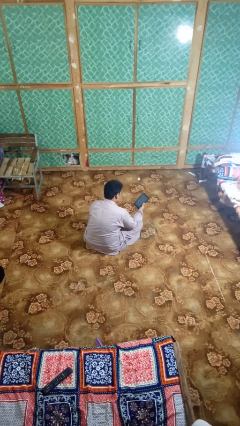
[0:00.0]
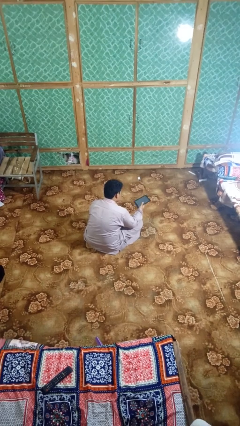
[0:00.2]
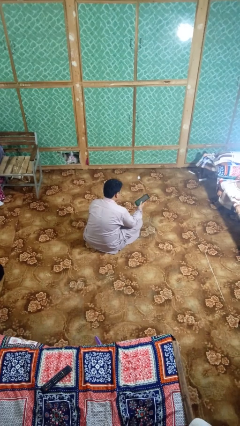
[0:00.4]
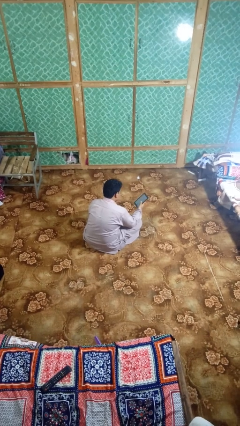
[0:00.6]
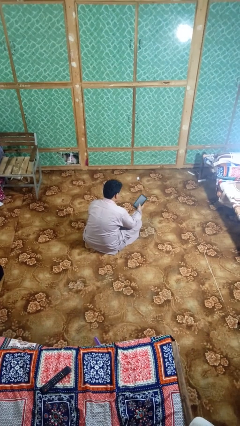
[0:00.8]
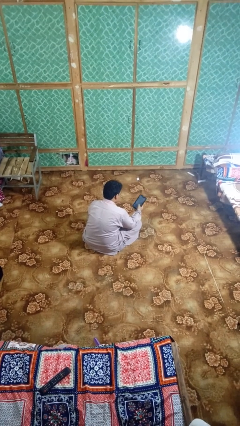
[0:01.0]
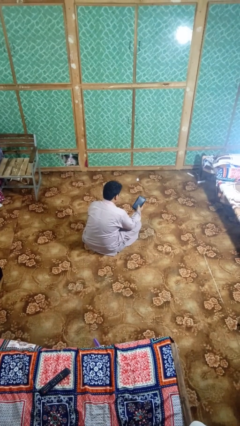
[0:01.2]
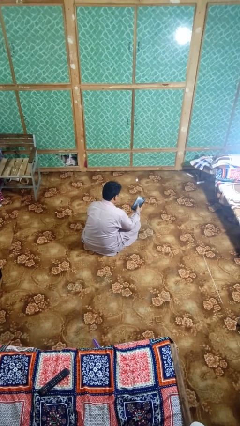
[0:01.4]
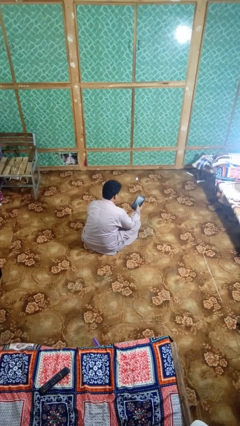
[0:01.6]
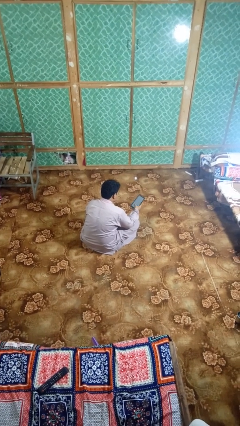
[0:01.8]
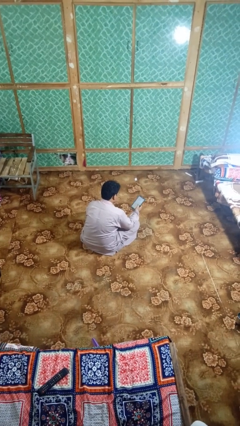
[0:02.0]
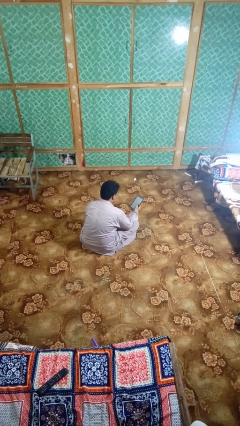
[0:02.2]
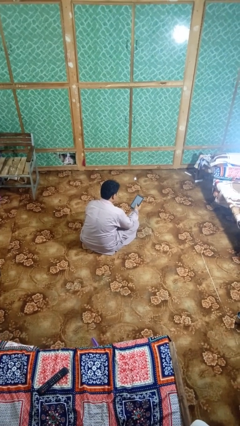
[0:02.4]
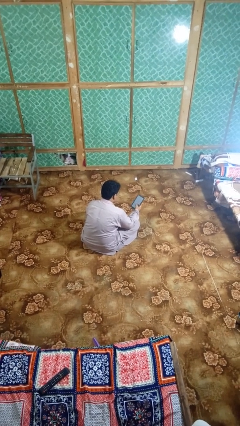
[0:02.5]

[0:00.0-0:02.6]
person interacts with tablet

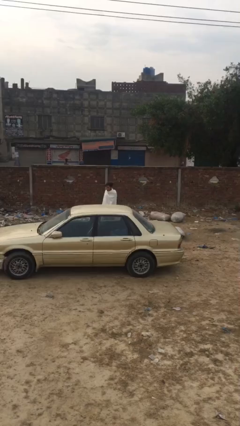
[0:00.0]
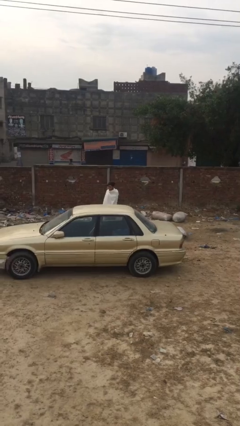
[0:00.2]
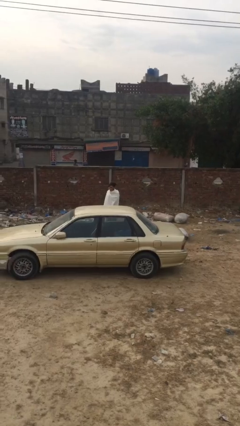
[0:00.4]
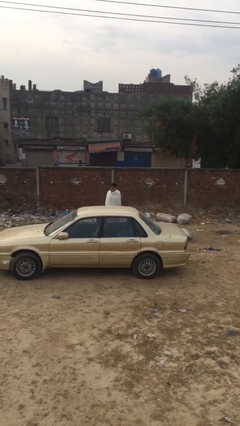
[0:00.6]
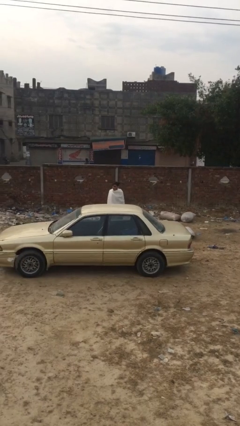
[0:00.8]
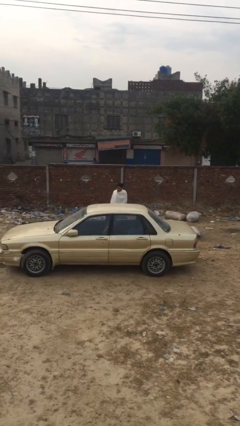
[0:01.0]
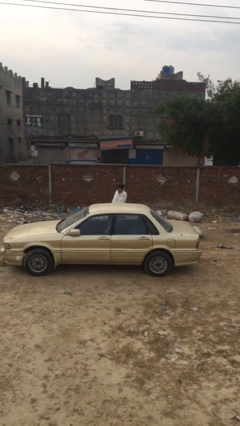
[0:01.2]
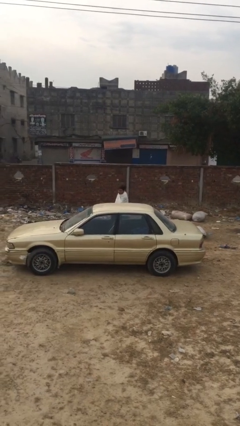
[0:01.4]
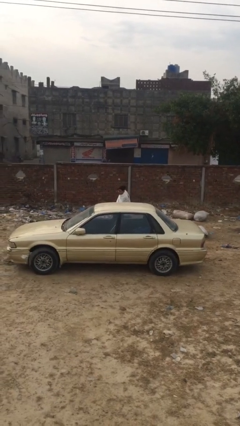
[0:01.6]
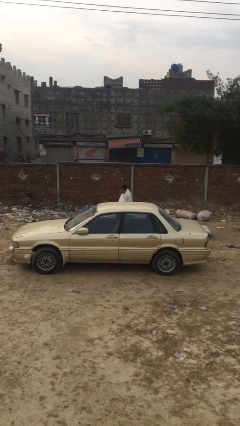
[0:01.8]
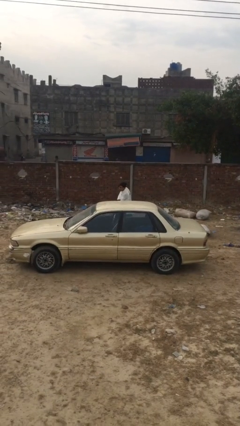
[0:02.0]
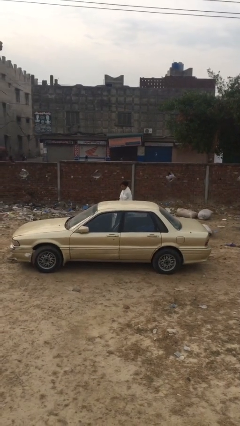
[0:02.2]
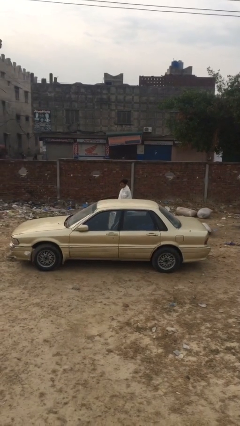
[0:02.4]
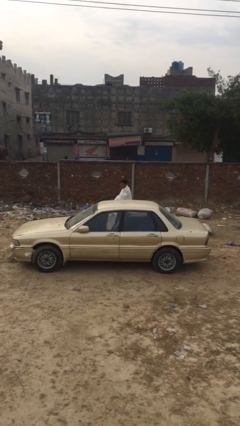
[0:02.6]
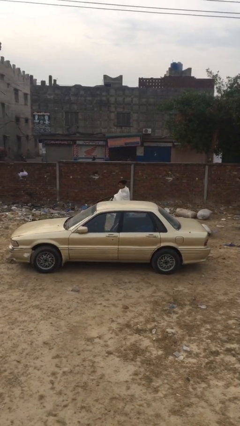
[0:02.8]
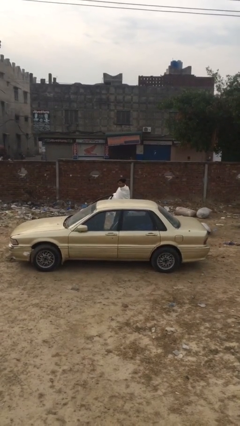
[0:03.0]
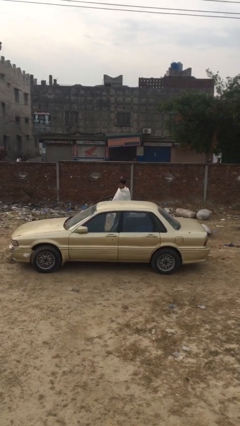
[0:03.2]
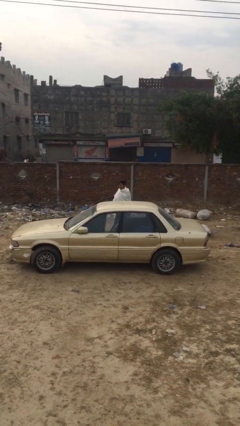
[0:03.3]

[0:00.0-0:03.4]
person opens car door

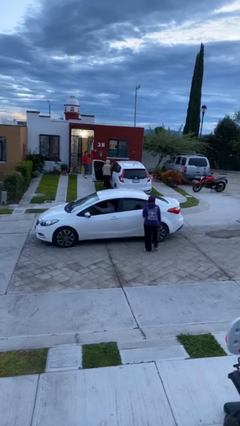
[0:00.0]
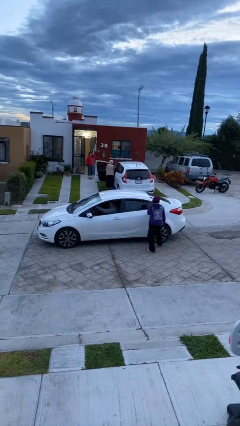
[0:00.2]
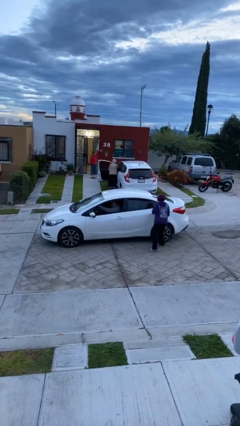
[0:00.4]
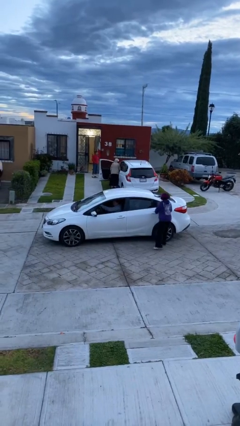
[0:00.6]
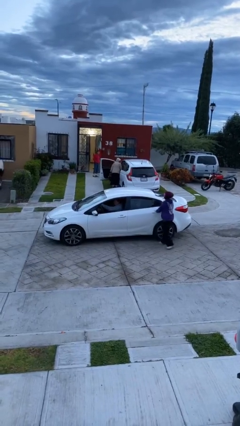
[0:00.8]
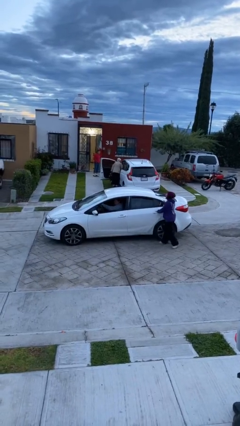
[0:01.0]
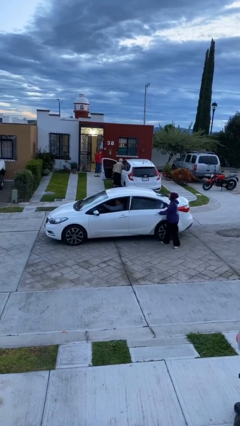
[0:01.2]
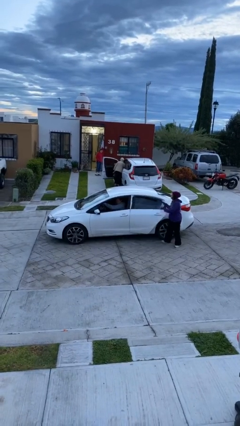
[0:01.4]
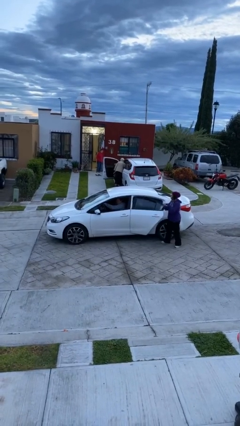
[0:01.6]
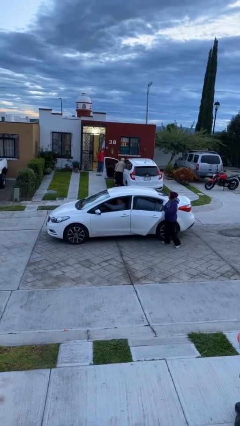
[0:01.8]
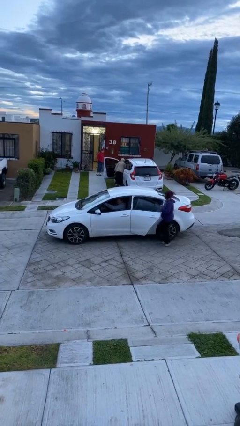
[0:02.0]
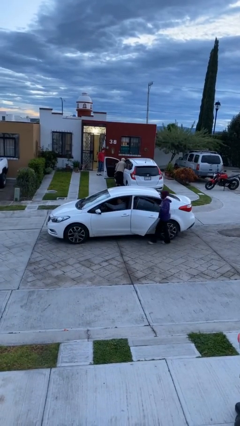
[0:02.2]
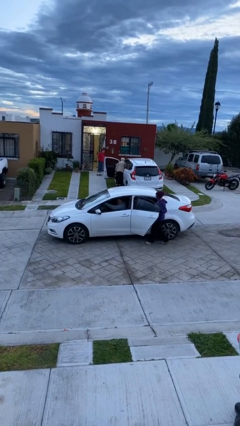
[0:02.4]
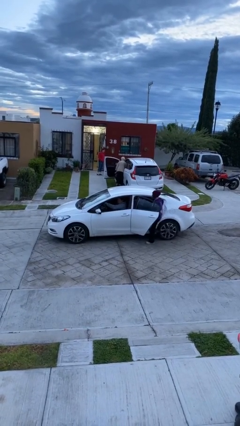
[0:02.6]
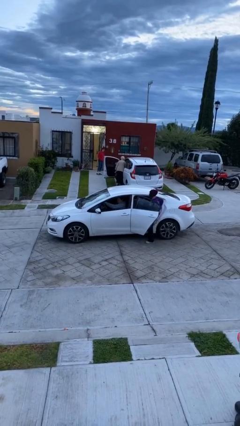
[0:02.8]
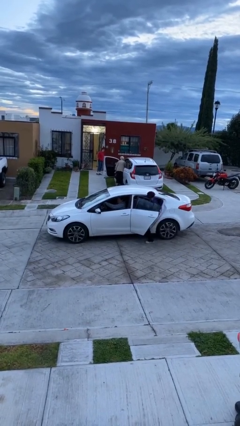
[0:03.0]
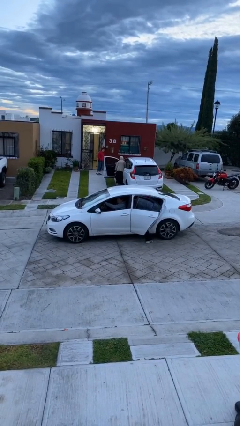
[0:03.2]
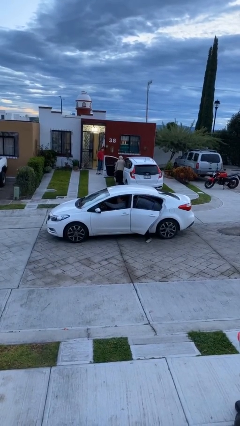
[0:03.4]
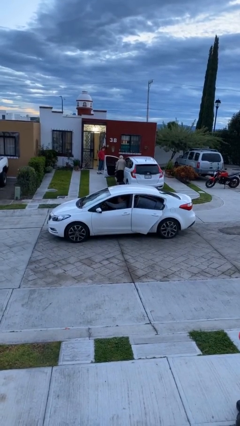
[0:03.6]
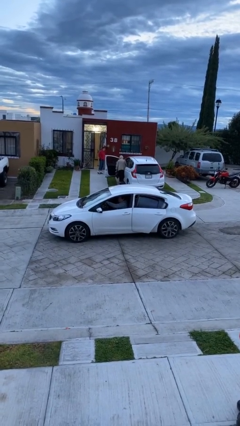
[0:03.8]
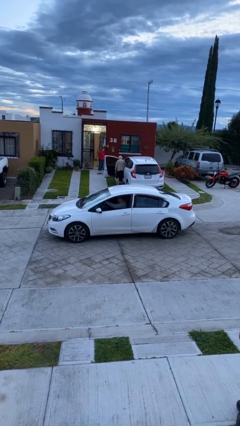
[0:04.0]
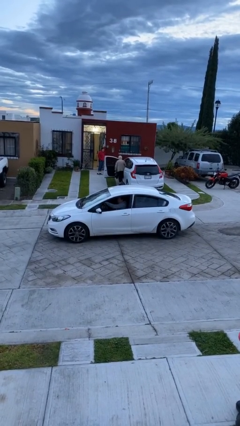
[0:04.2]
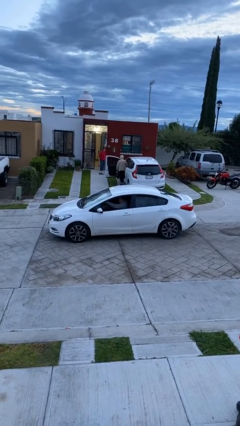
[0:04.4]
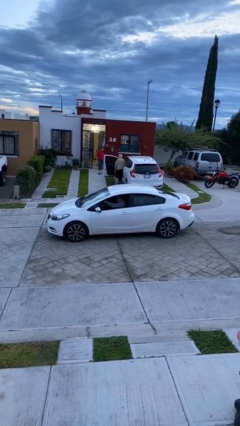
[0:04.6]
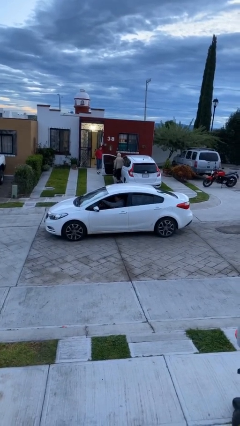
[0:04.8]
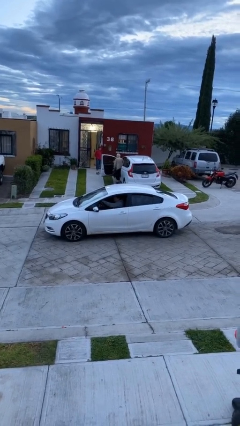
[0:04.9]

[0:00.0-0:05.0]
car picks up person

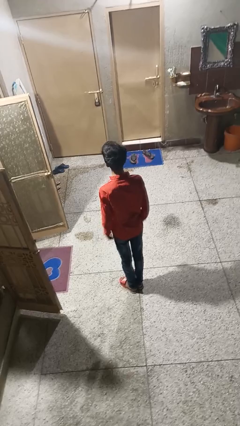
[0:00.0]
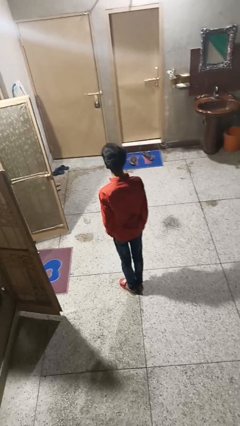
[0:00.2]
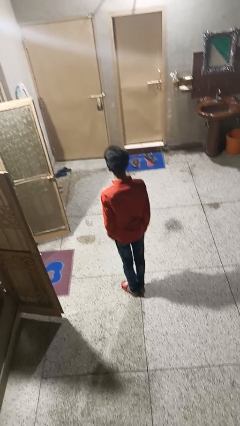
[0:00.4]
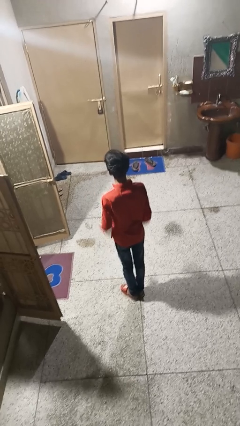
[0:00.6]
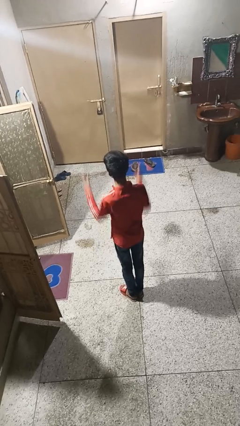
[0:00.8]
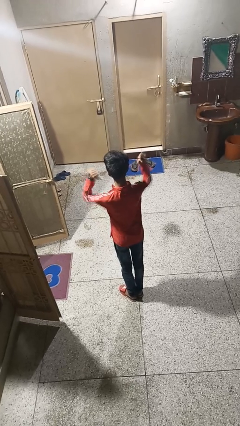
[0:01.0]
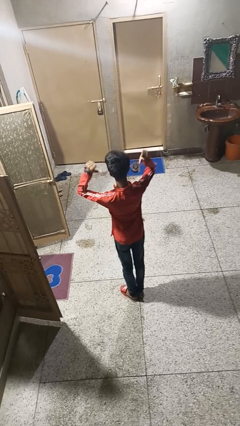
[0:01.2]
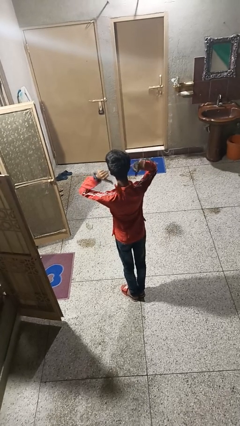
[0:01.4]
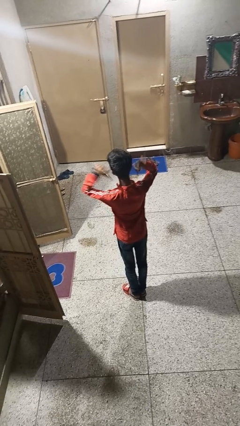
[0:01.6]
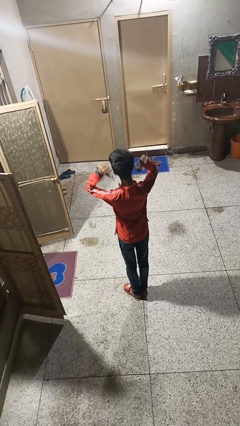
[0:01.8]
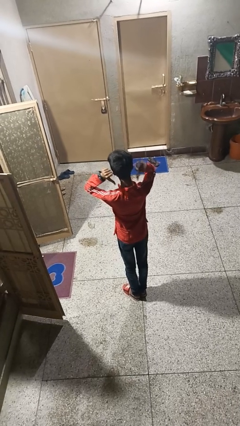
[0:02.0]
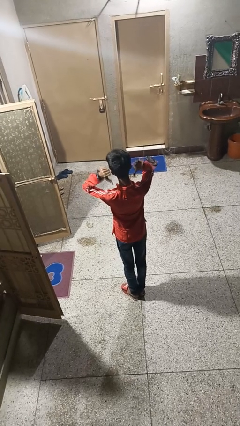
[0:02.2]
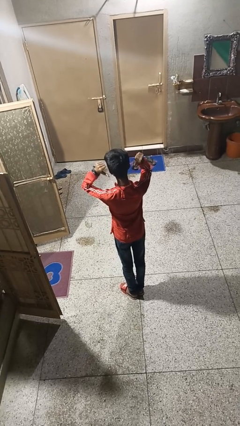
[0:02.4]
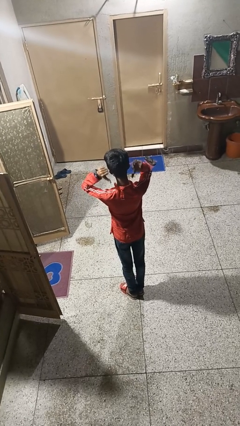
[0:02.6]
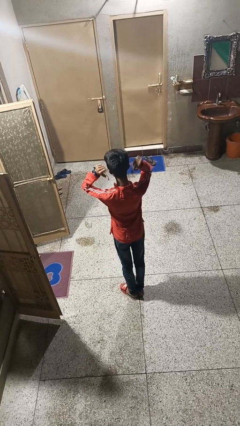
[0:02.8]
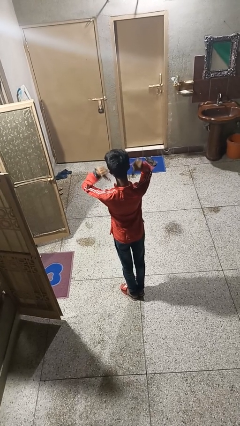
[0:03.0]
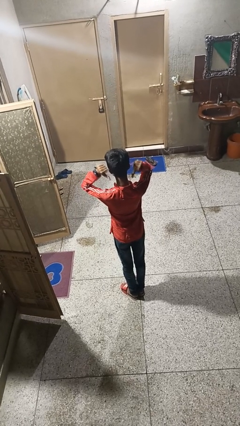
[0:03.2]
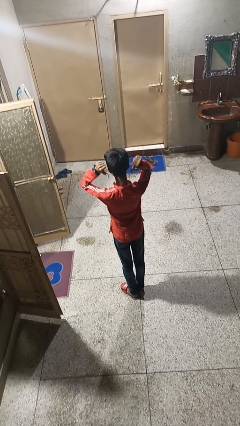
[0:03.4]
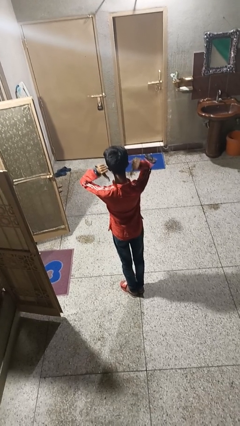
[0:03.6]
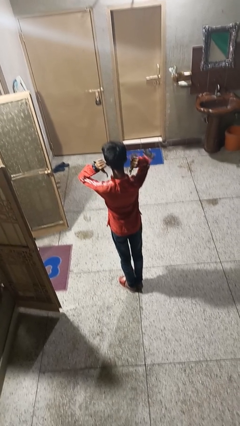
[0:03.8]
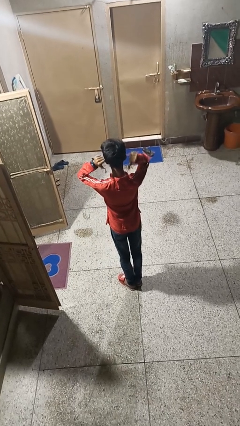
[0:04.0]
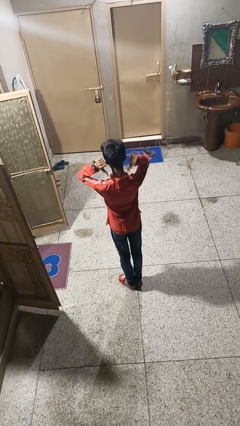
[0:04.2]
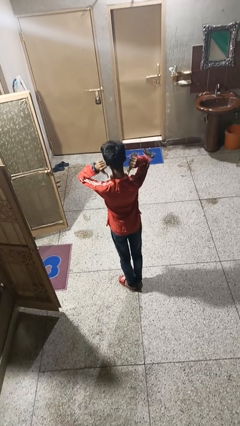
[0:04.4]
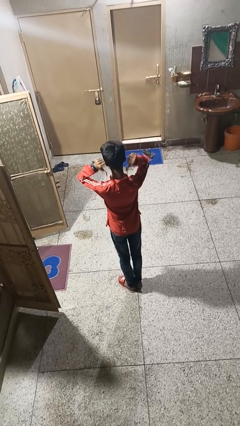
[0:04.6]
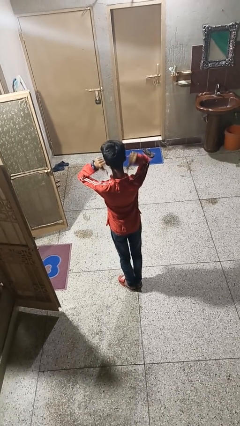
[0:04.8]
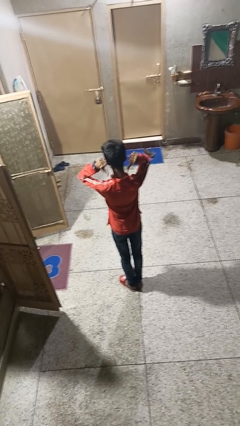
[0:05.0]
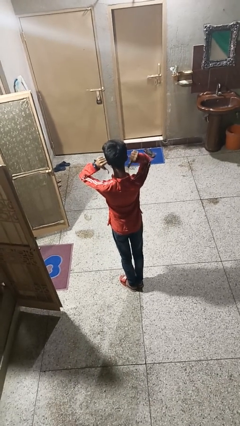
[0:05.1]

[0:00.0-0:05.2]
person gestures behind me

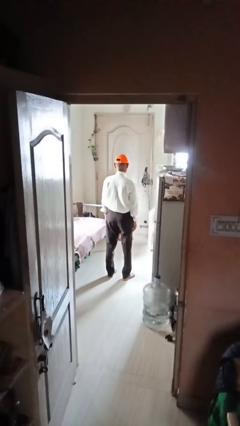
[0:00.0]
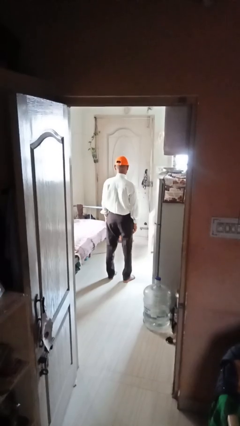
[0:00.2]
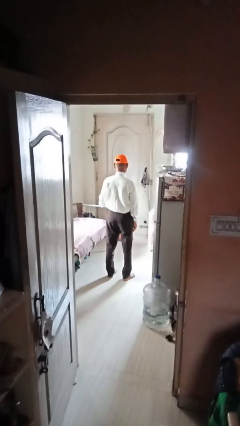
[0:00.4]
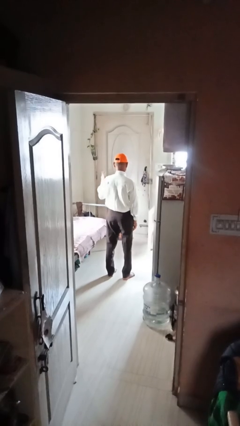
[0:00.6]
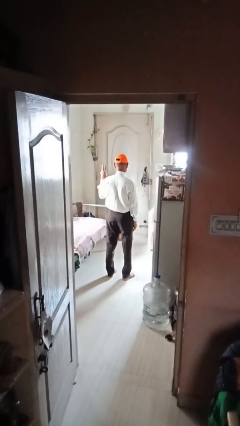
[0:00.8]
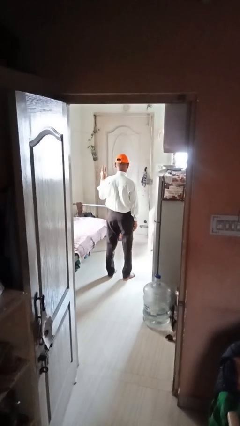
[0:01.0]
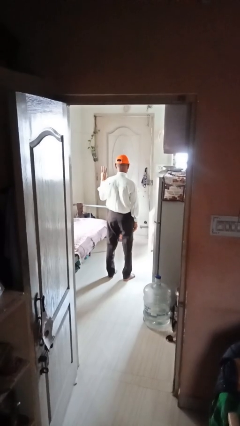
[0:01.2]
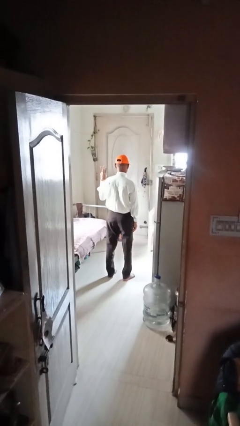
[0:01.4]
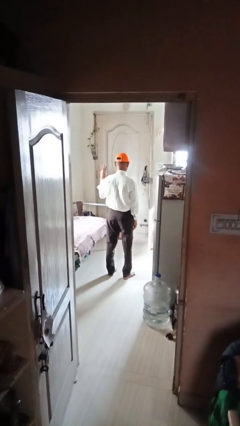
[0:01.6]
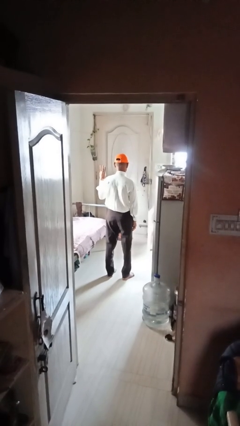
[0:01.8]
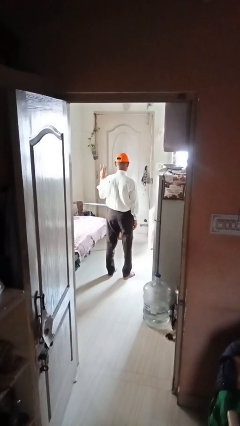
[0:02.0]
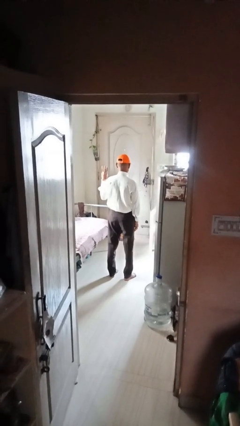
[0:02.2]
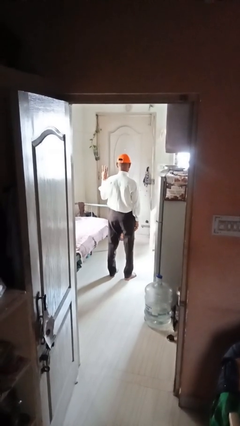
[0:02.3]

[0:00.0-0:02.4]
person gestures number three
